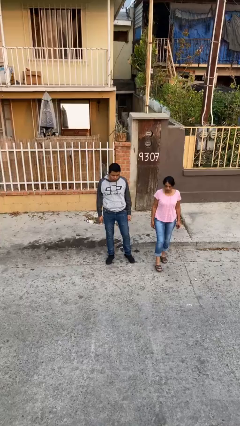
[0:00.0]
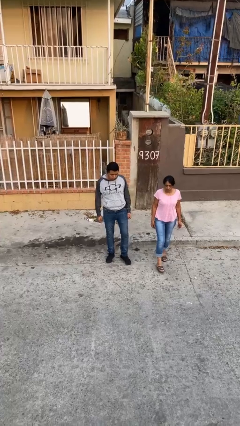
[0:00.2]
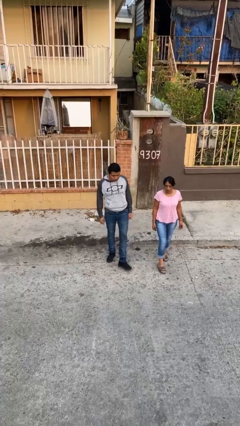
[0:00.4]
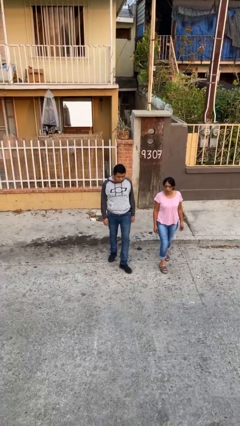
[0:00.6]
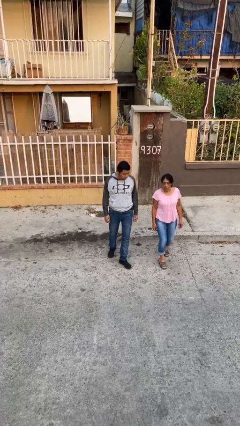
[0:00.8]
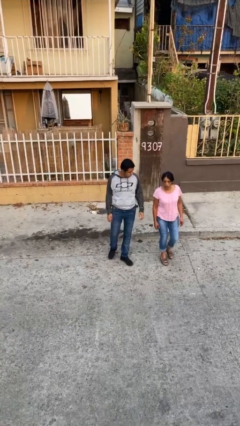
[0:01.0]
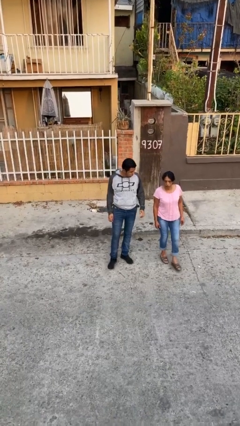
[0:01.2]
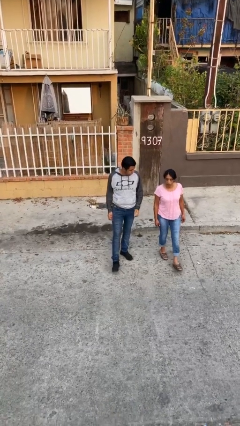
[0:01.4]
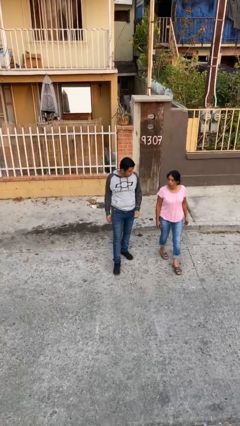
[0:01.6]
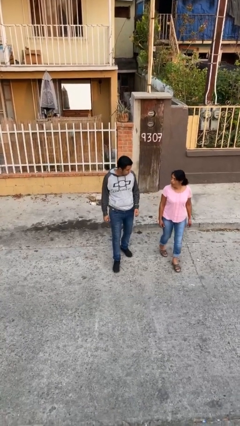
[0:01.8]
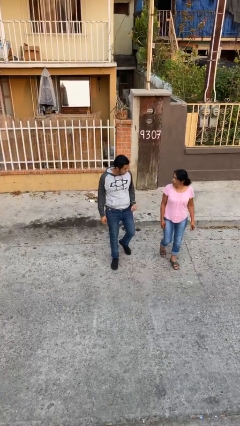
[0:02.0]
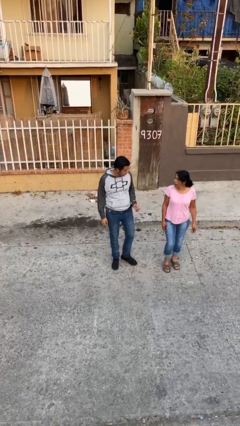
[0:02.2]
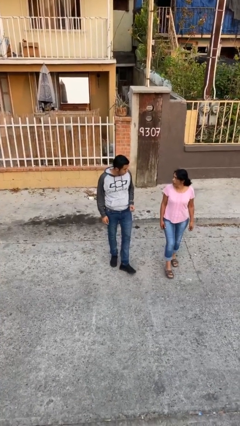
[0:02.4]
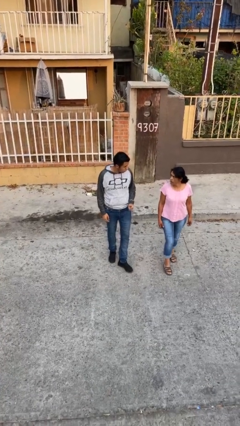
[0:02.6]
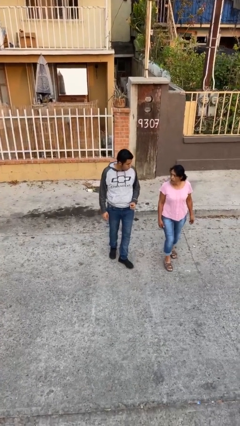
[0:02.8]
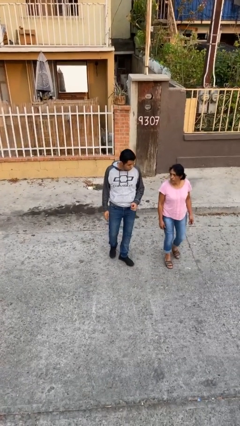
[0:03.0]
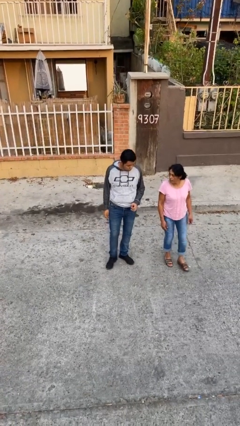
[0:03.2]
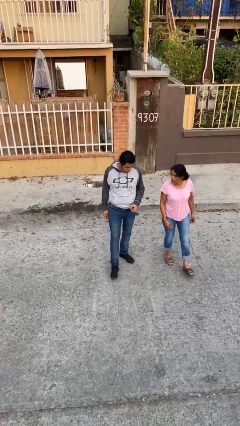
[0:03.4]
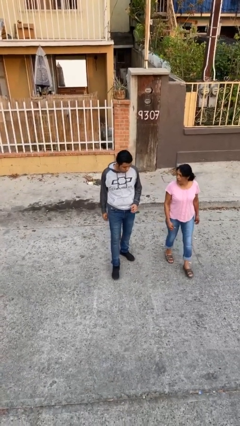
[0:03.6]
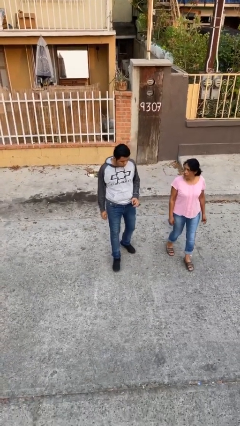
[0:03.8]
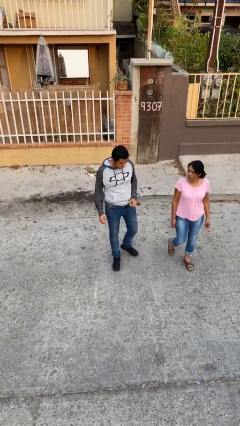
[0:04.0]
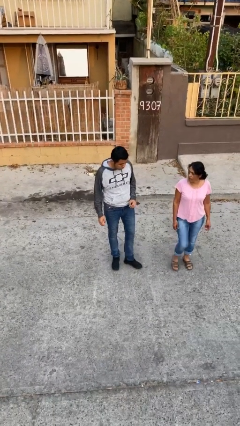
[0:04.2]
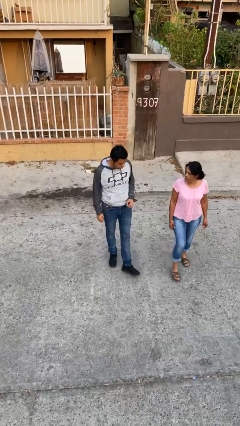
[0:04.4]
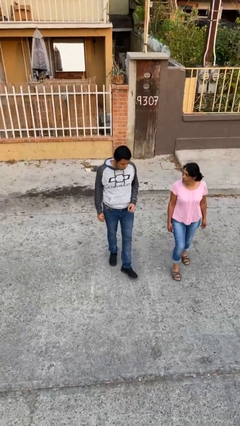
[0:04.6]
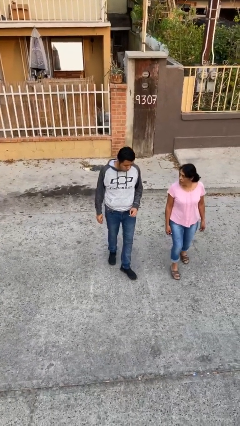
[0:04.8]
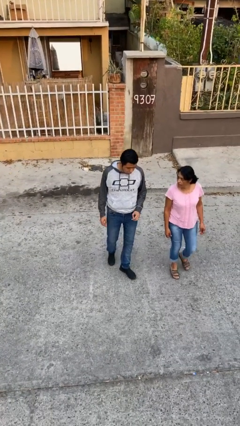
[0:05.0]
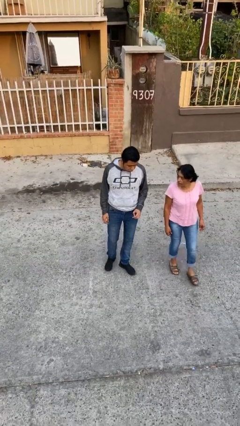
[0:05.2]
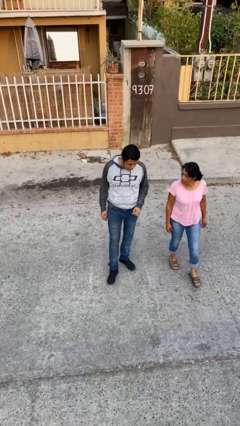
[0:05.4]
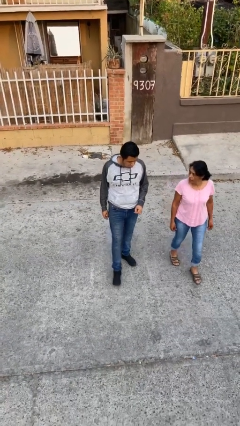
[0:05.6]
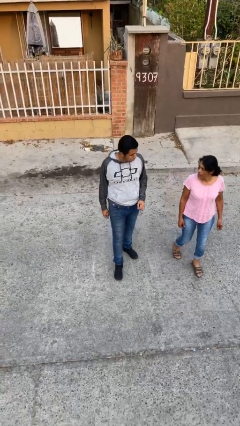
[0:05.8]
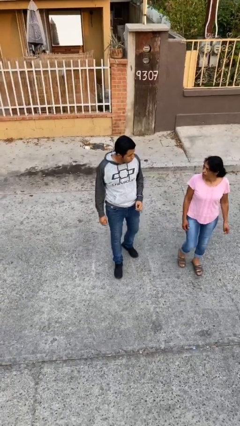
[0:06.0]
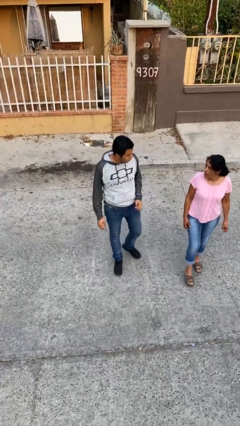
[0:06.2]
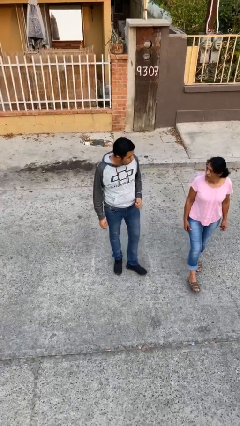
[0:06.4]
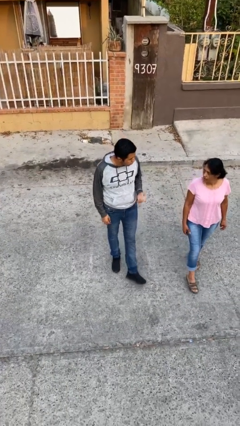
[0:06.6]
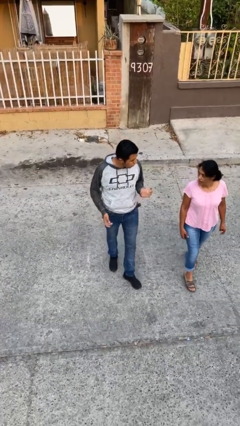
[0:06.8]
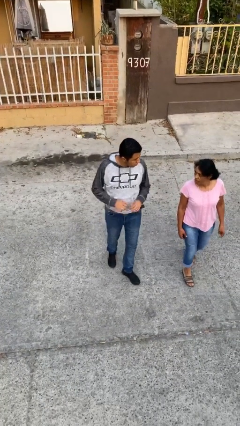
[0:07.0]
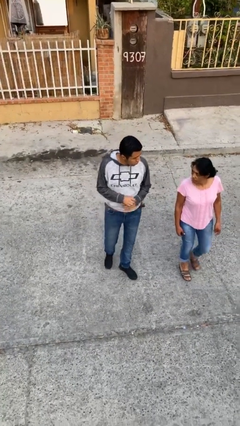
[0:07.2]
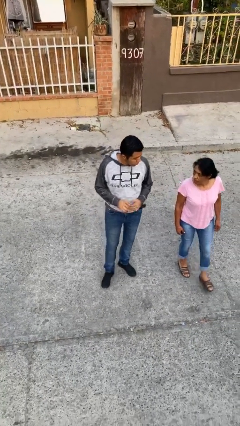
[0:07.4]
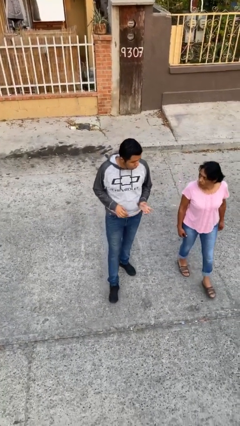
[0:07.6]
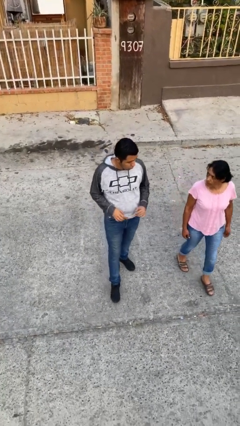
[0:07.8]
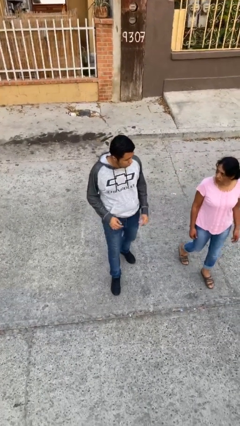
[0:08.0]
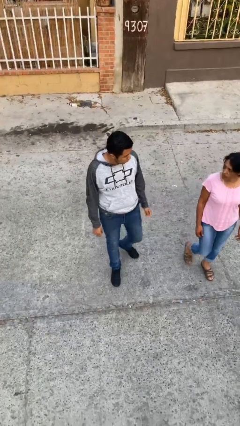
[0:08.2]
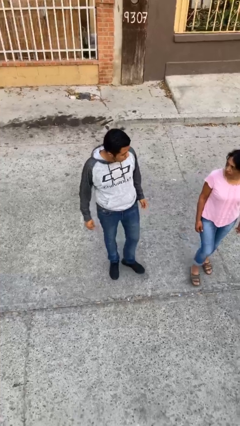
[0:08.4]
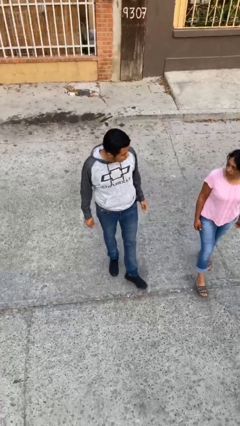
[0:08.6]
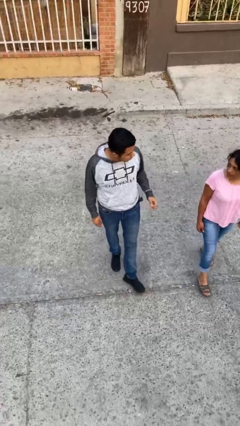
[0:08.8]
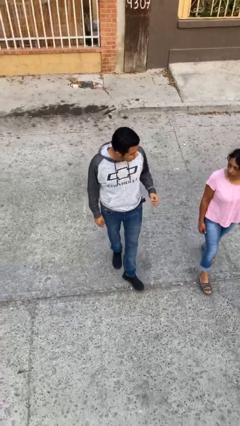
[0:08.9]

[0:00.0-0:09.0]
person talks to person

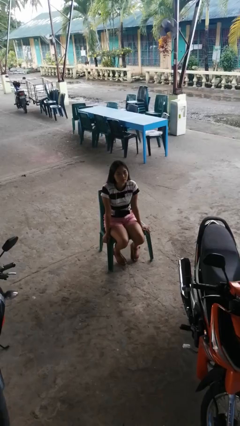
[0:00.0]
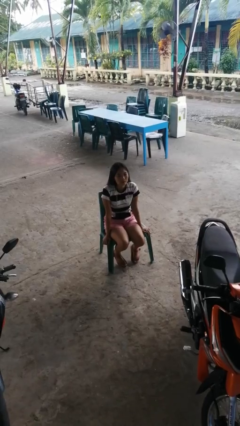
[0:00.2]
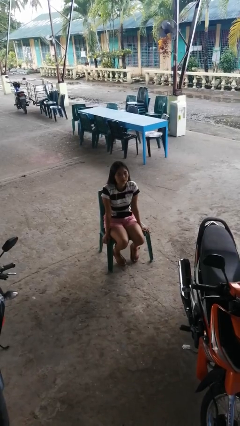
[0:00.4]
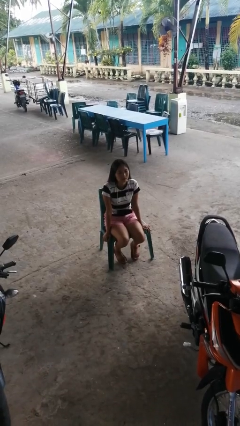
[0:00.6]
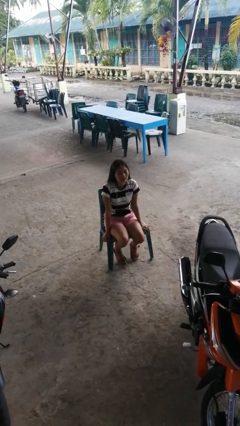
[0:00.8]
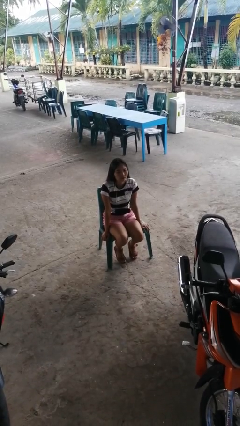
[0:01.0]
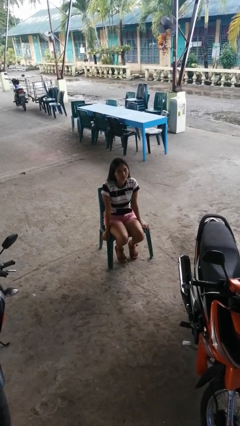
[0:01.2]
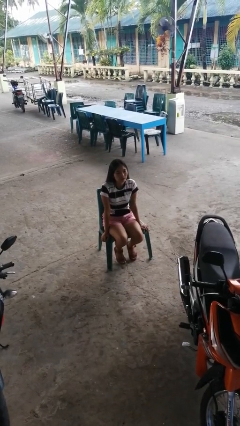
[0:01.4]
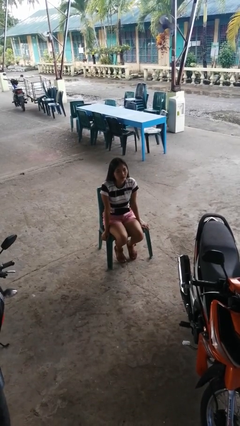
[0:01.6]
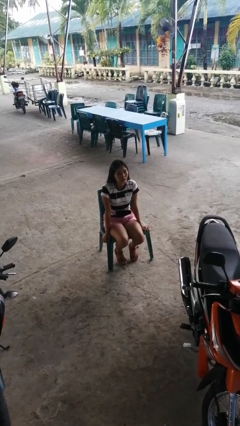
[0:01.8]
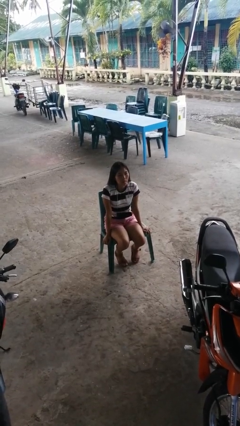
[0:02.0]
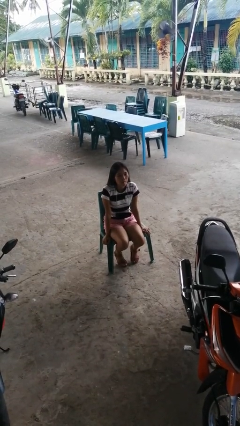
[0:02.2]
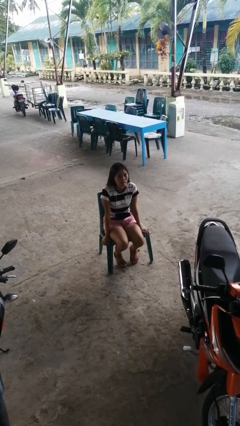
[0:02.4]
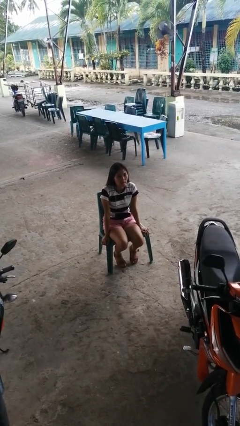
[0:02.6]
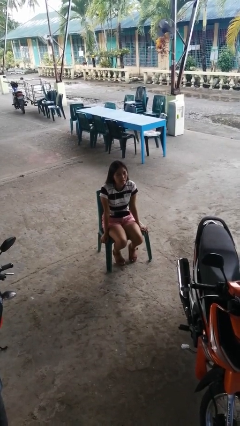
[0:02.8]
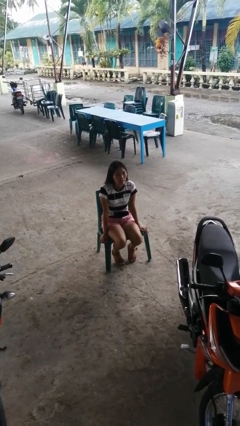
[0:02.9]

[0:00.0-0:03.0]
person sticks out tongue

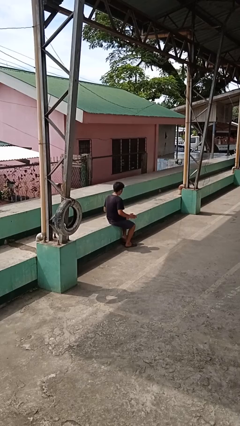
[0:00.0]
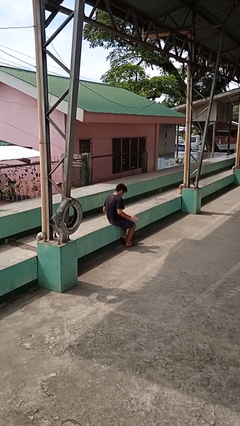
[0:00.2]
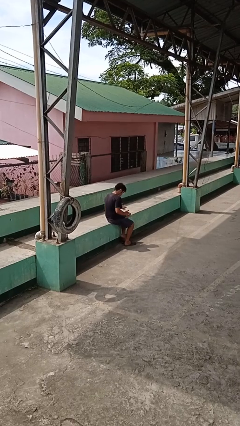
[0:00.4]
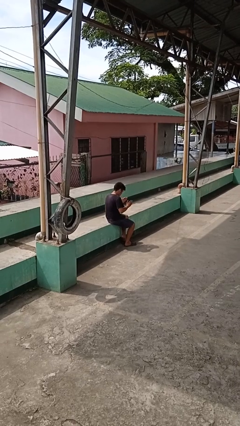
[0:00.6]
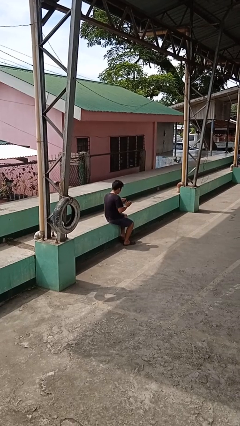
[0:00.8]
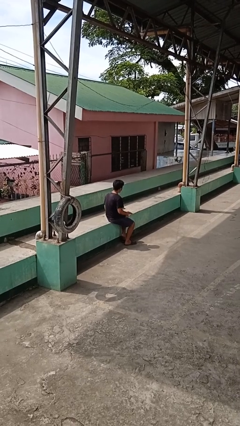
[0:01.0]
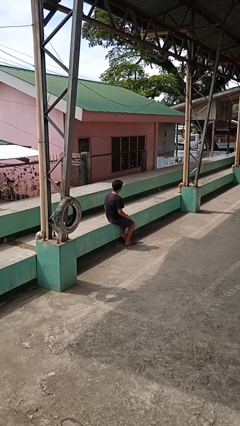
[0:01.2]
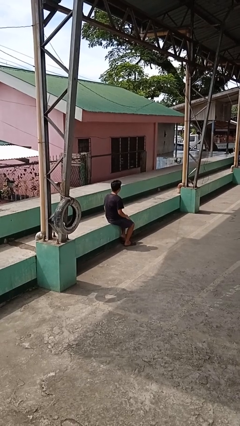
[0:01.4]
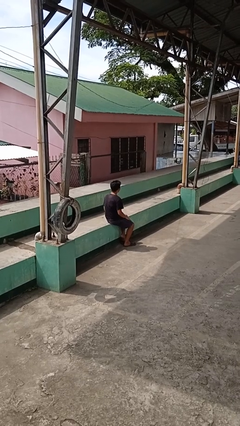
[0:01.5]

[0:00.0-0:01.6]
person slaps hands on thighs

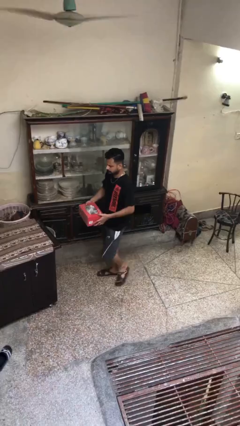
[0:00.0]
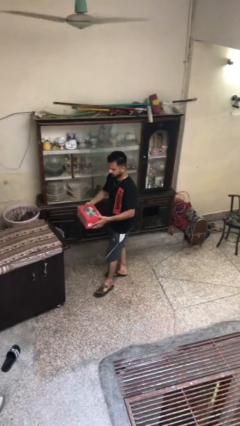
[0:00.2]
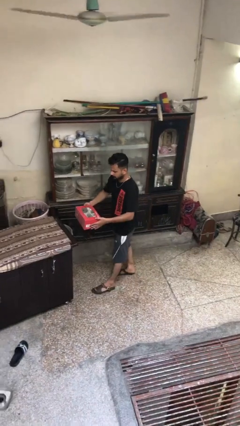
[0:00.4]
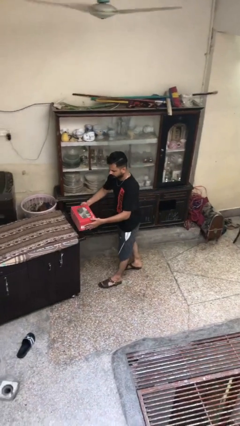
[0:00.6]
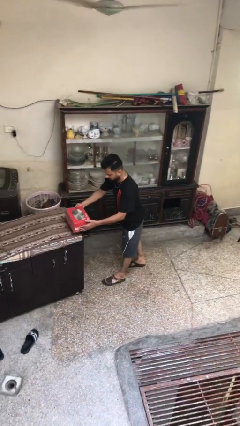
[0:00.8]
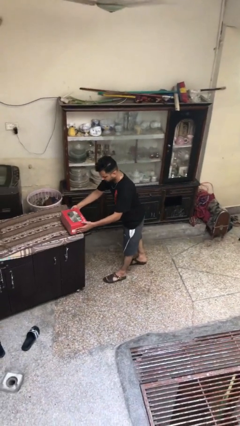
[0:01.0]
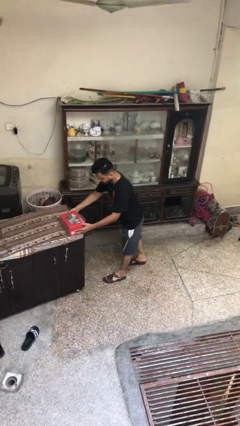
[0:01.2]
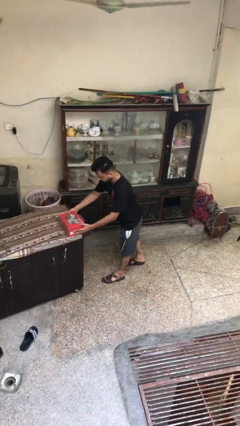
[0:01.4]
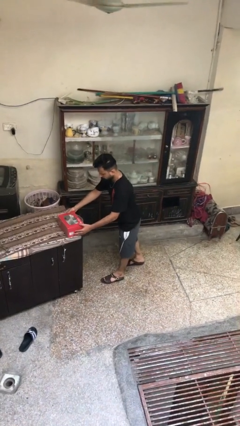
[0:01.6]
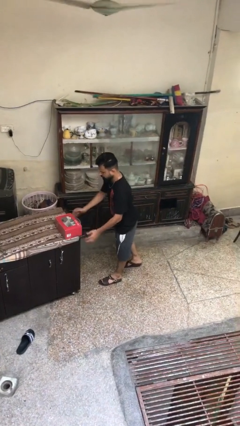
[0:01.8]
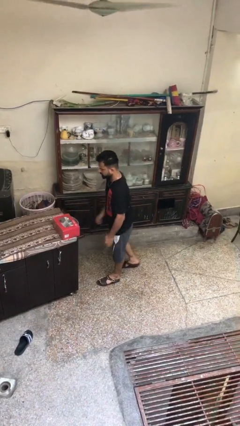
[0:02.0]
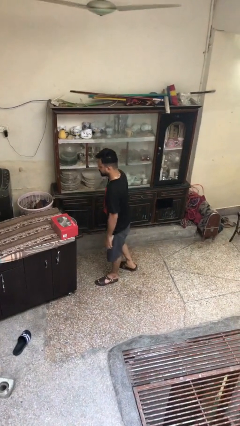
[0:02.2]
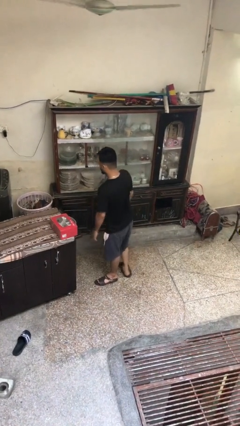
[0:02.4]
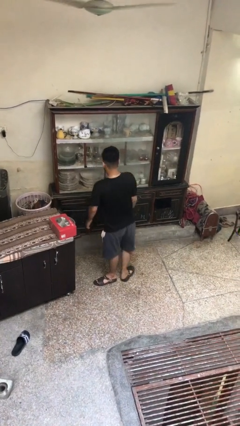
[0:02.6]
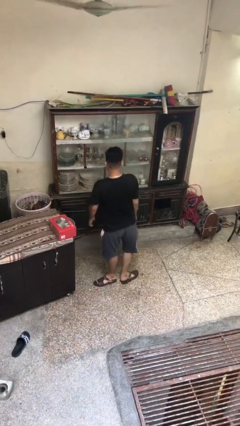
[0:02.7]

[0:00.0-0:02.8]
person puts down object on table

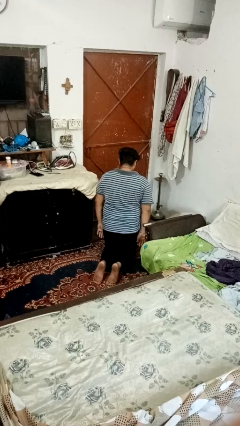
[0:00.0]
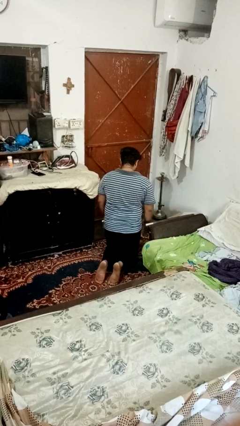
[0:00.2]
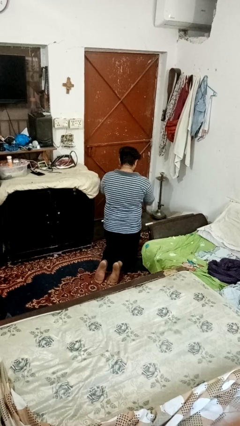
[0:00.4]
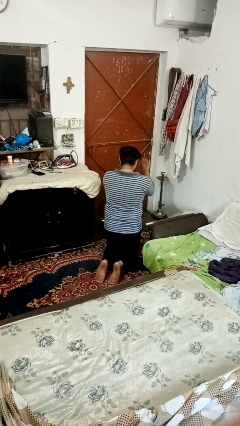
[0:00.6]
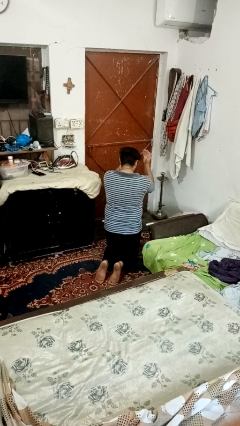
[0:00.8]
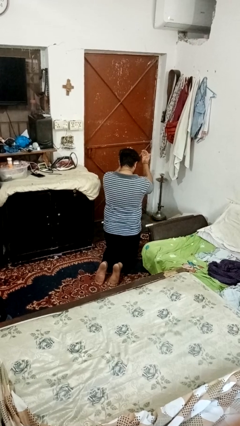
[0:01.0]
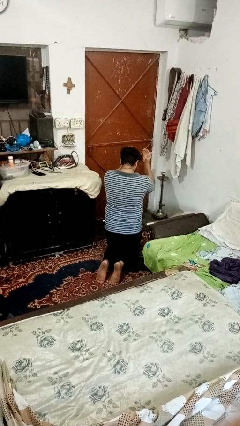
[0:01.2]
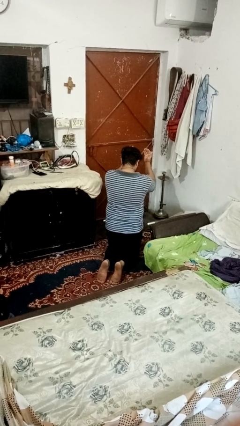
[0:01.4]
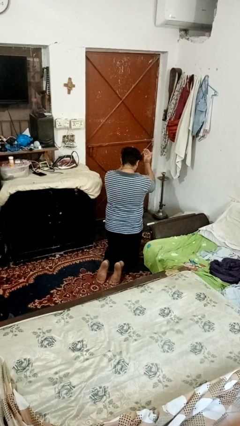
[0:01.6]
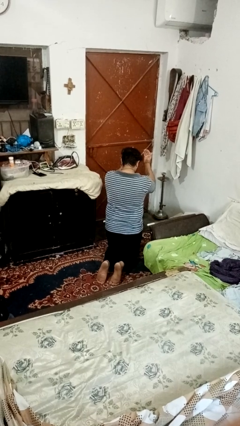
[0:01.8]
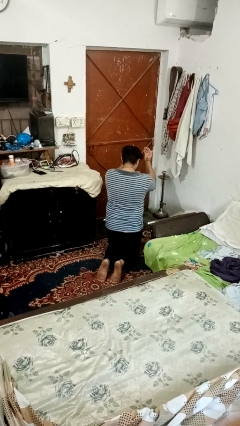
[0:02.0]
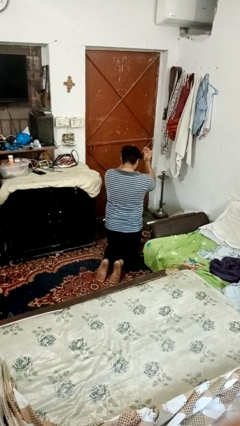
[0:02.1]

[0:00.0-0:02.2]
person prays
